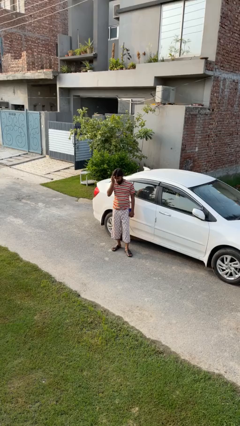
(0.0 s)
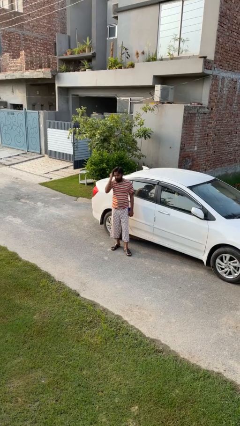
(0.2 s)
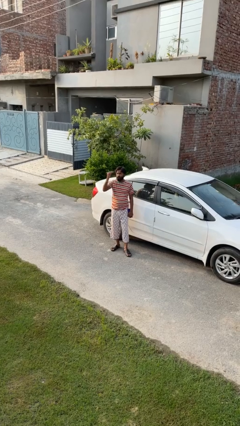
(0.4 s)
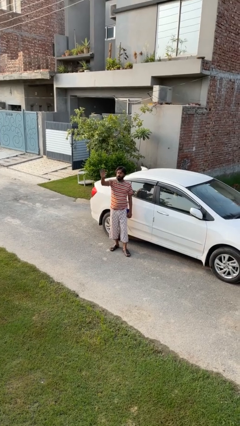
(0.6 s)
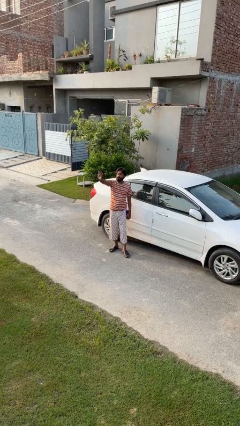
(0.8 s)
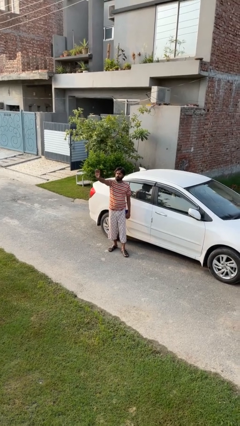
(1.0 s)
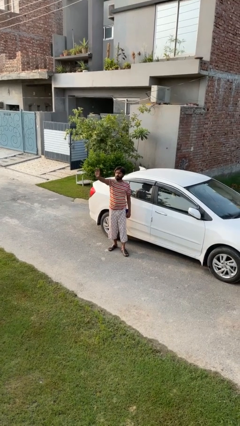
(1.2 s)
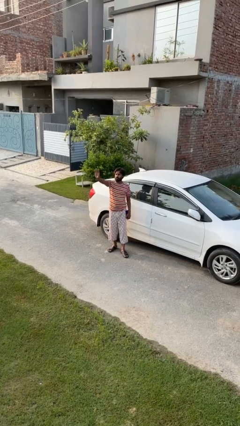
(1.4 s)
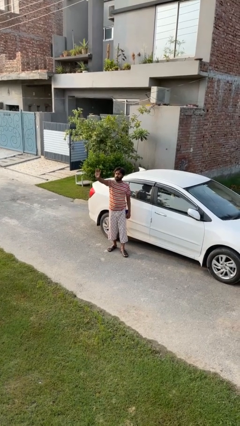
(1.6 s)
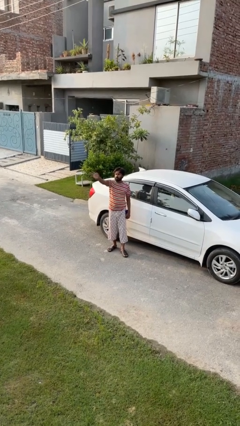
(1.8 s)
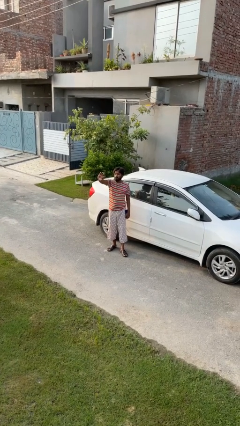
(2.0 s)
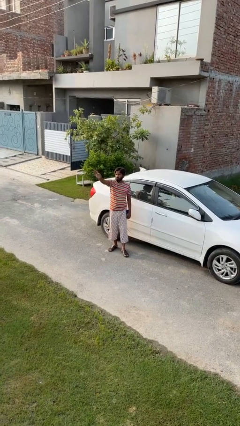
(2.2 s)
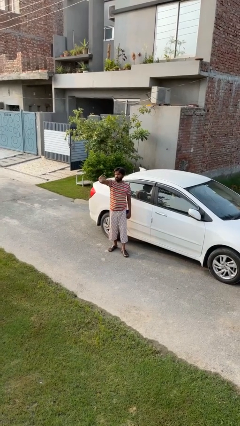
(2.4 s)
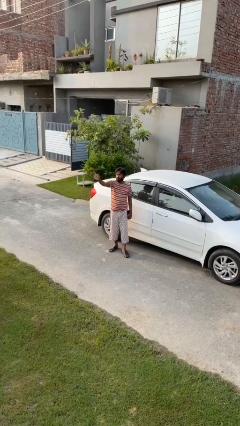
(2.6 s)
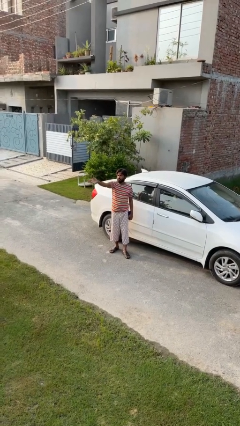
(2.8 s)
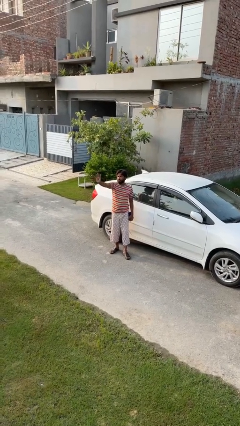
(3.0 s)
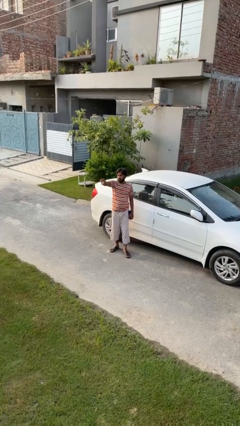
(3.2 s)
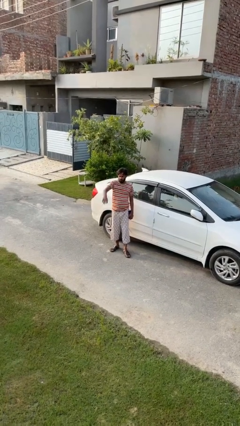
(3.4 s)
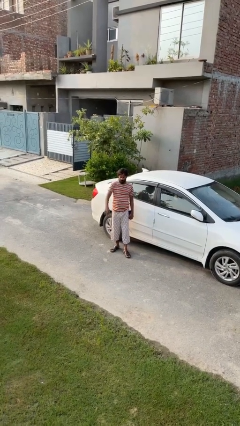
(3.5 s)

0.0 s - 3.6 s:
person waves at person

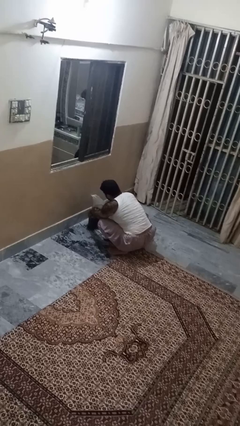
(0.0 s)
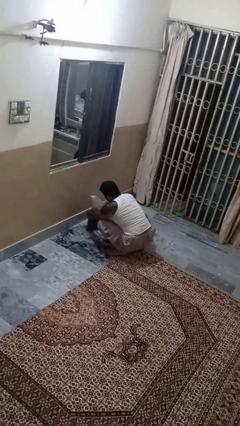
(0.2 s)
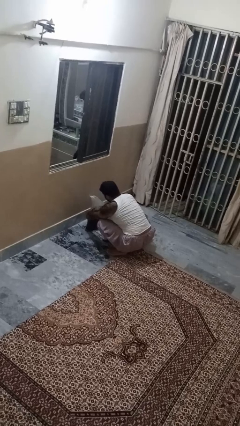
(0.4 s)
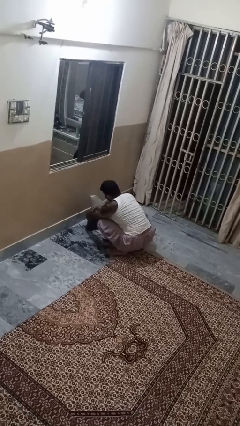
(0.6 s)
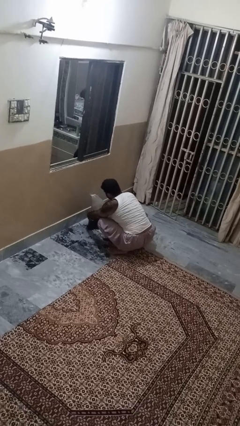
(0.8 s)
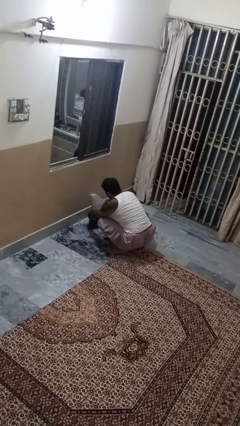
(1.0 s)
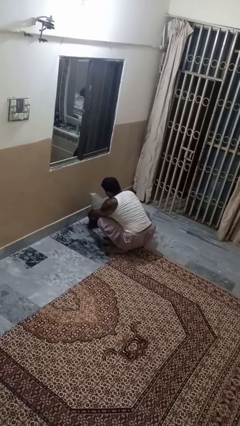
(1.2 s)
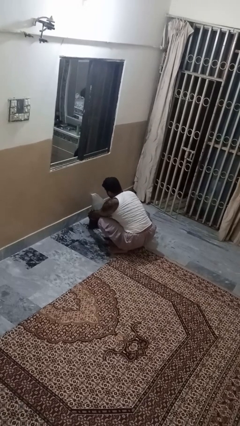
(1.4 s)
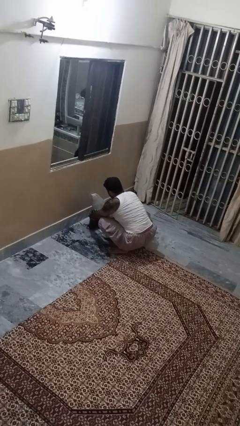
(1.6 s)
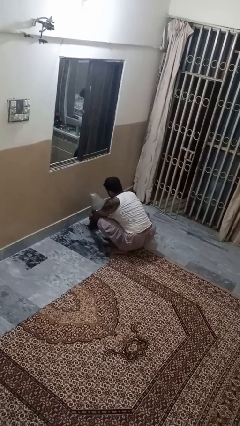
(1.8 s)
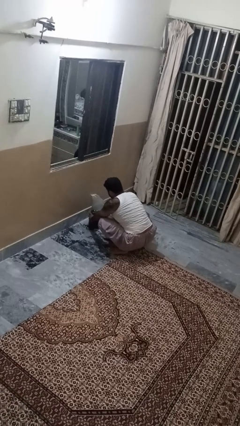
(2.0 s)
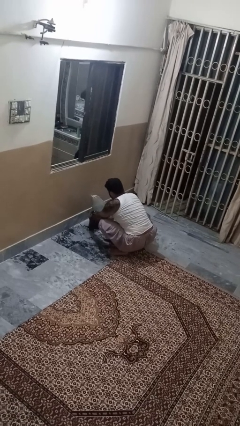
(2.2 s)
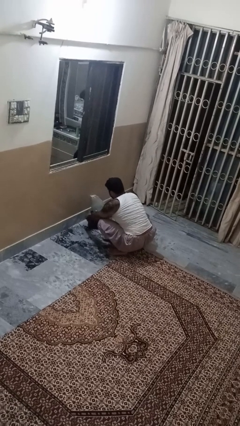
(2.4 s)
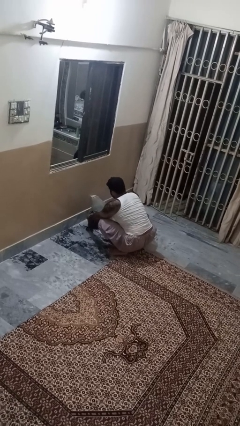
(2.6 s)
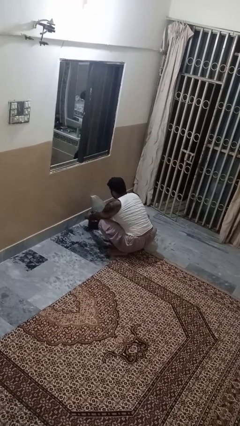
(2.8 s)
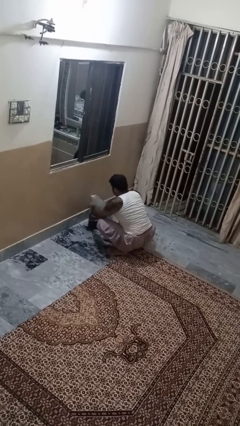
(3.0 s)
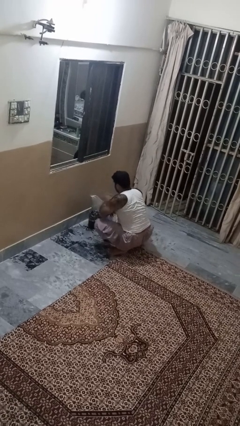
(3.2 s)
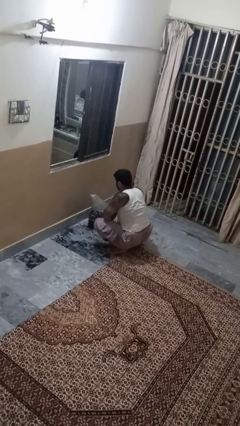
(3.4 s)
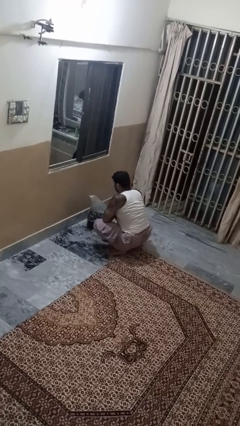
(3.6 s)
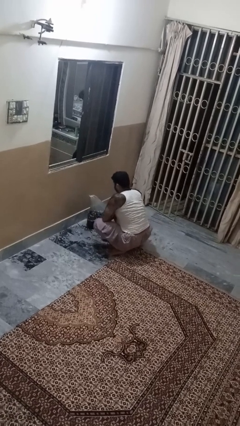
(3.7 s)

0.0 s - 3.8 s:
person inserts trashbag into trashcan

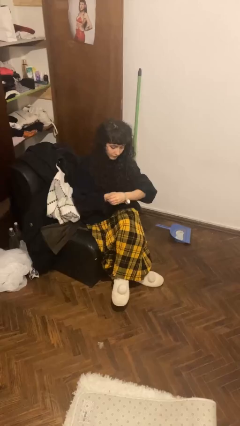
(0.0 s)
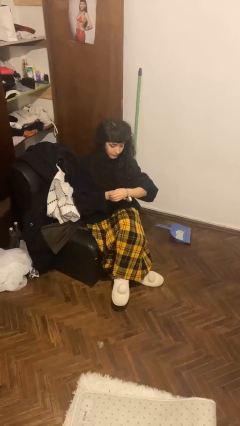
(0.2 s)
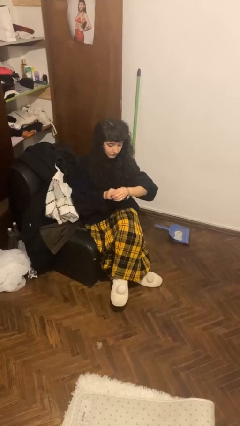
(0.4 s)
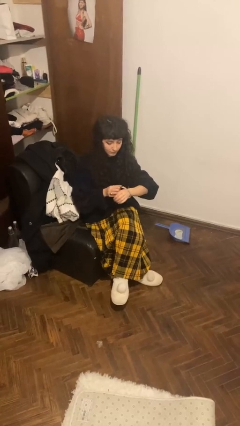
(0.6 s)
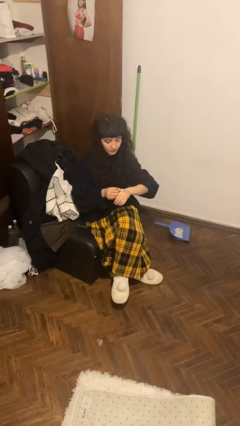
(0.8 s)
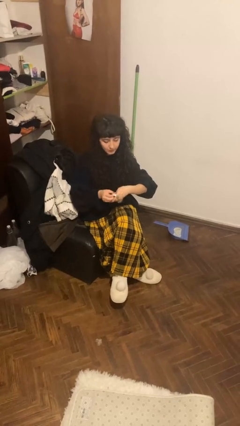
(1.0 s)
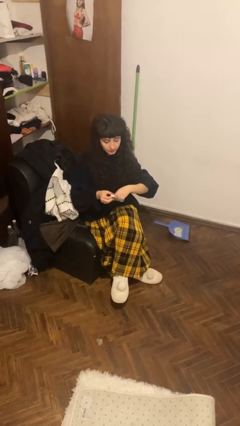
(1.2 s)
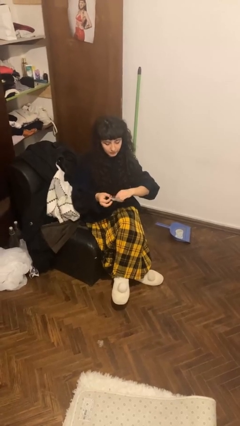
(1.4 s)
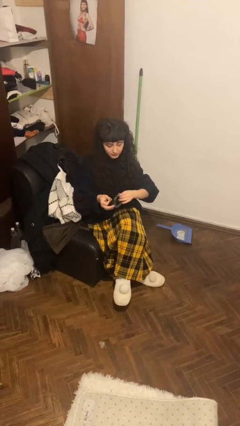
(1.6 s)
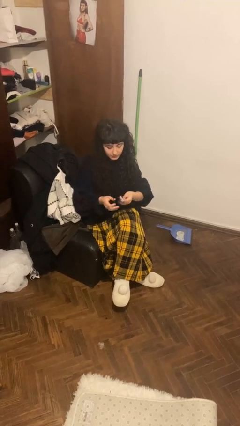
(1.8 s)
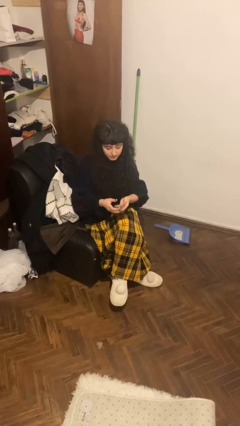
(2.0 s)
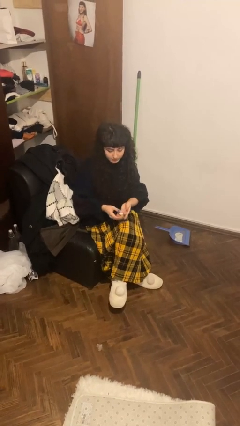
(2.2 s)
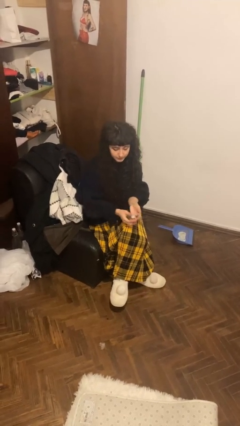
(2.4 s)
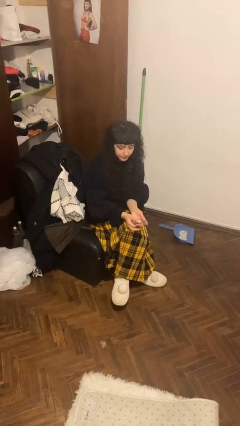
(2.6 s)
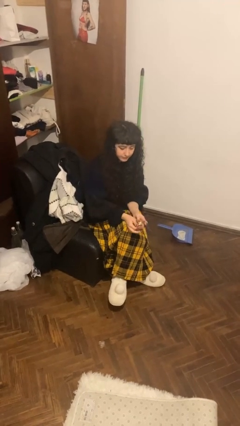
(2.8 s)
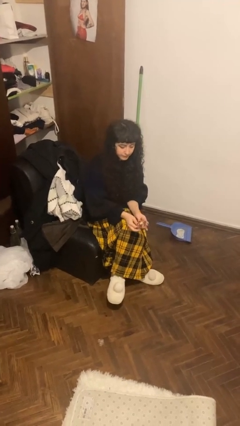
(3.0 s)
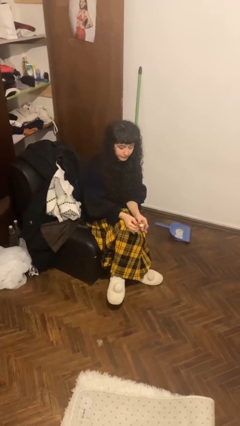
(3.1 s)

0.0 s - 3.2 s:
person takes off wristwatch

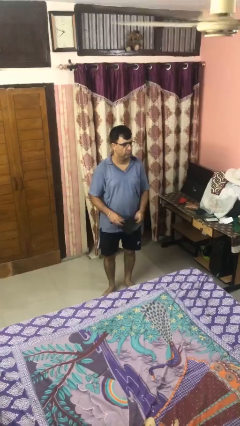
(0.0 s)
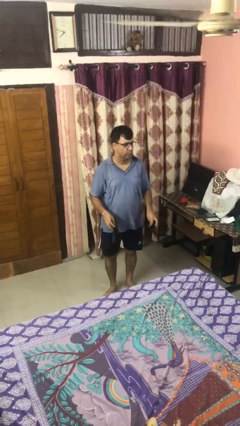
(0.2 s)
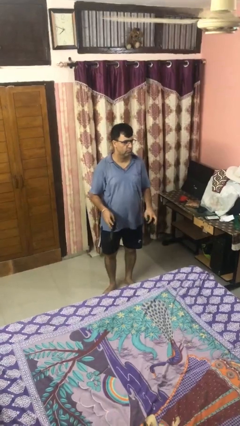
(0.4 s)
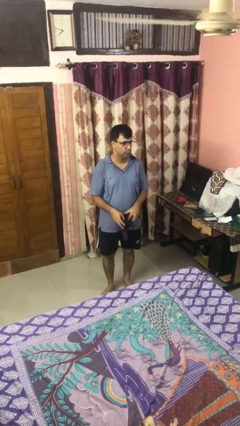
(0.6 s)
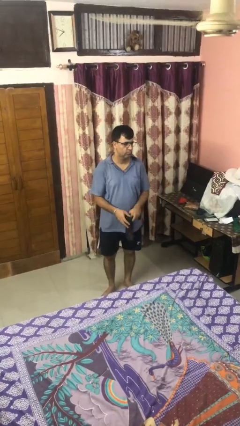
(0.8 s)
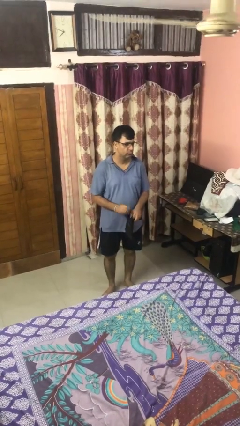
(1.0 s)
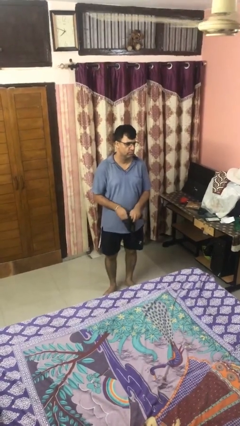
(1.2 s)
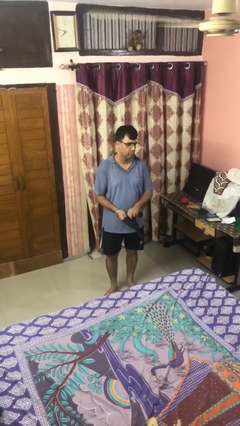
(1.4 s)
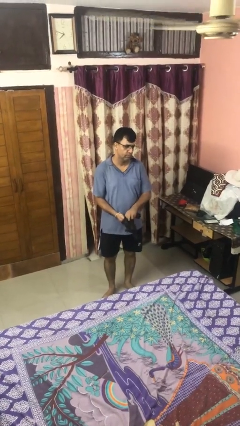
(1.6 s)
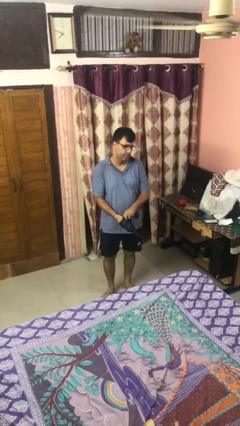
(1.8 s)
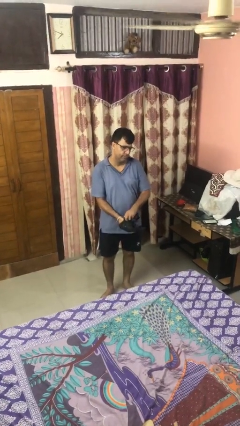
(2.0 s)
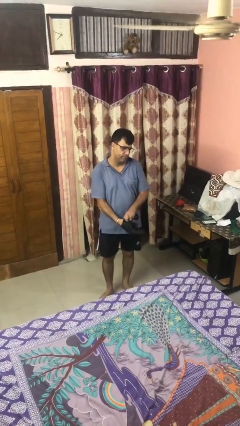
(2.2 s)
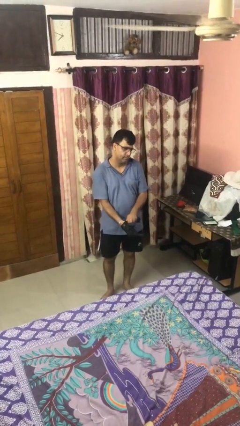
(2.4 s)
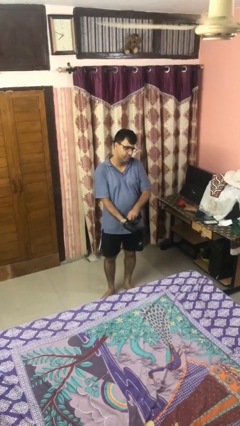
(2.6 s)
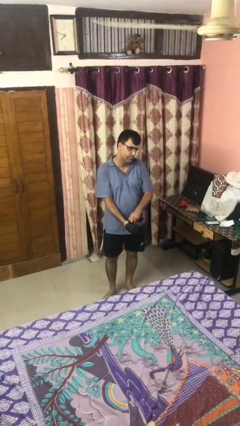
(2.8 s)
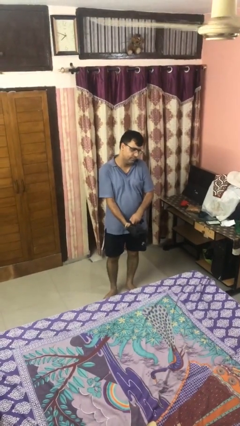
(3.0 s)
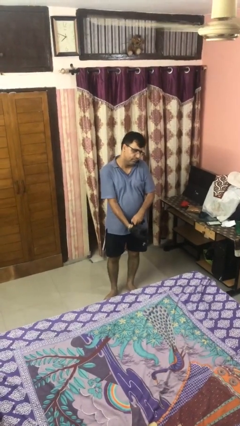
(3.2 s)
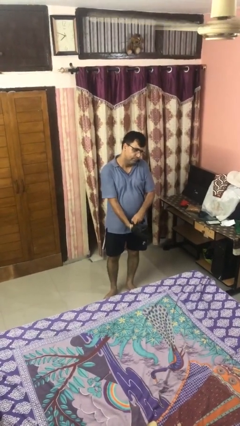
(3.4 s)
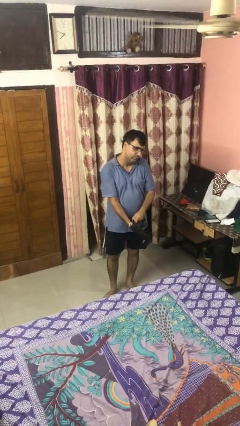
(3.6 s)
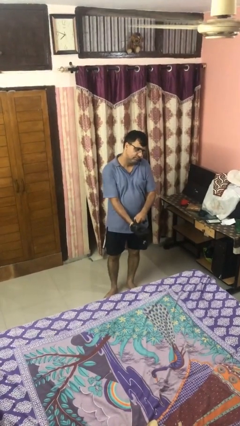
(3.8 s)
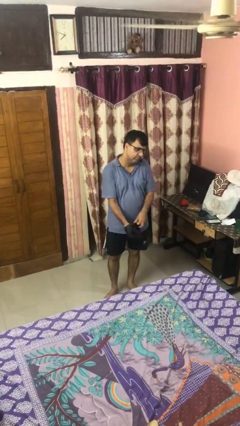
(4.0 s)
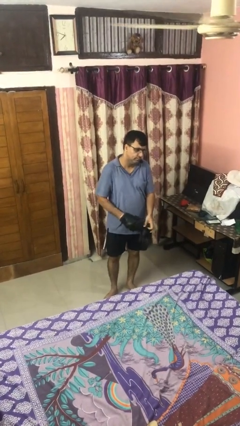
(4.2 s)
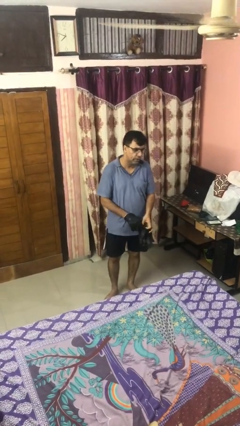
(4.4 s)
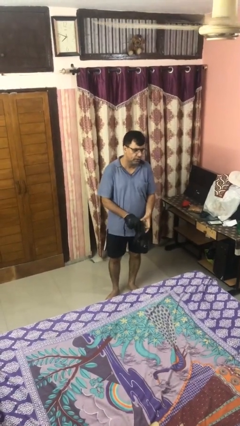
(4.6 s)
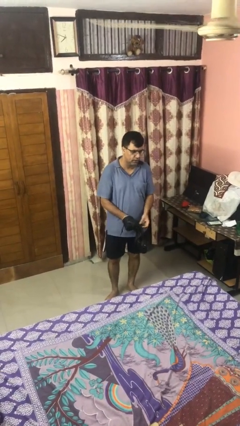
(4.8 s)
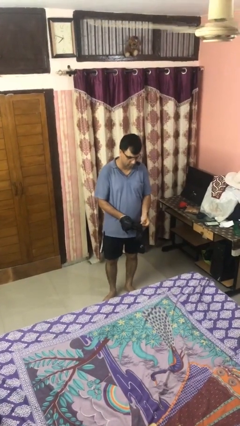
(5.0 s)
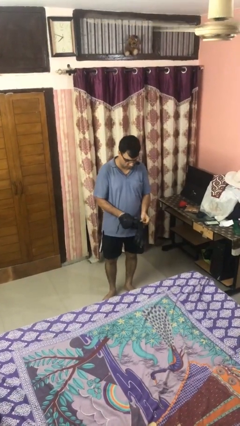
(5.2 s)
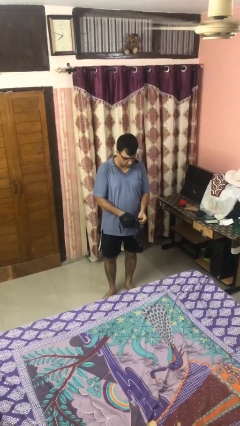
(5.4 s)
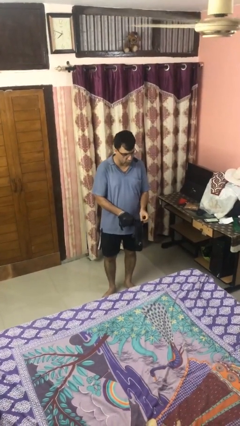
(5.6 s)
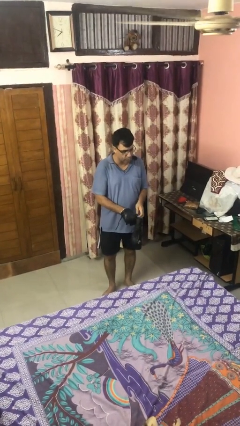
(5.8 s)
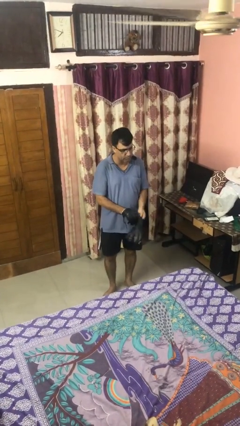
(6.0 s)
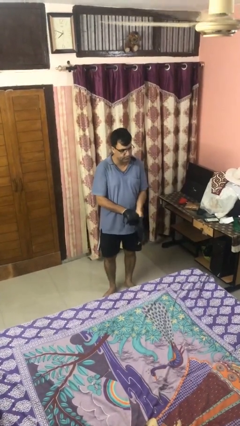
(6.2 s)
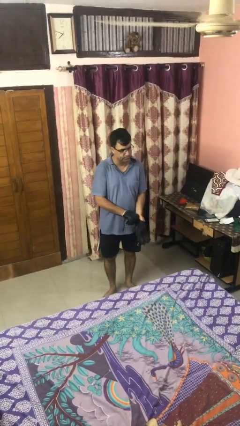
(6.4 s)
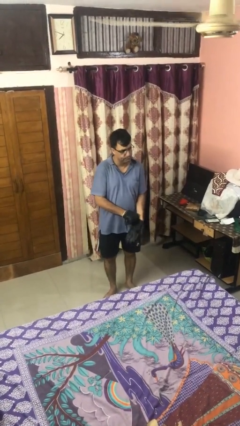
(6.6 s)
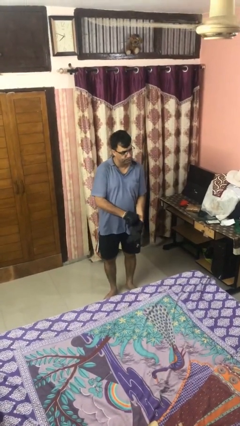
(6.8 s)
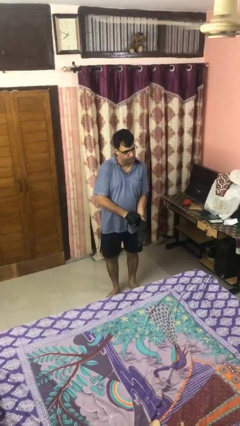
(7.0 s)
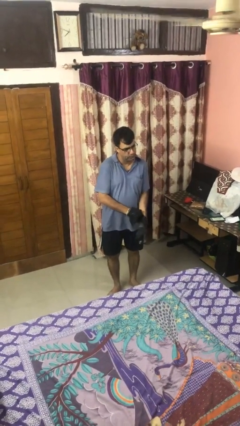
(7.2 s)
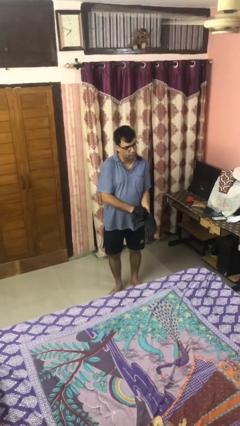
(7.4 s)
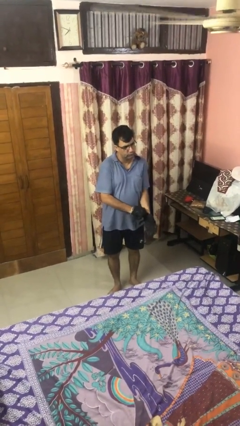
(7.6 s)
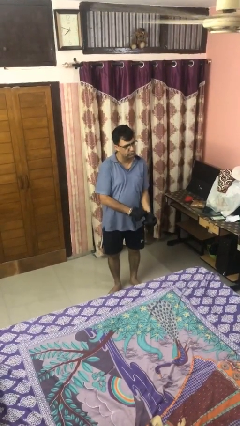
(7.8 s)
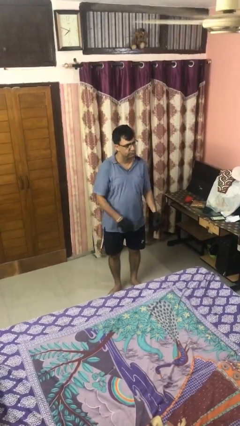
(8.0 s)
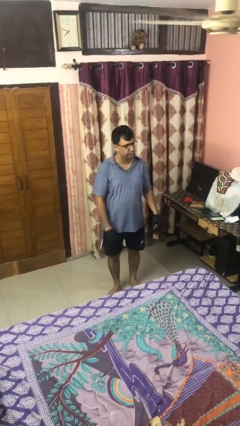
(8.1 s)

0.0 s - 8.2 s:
person puts on gloves
